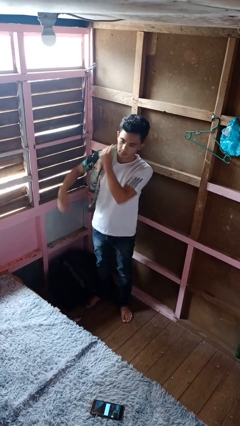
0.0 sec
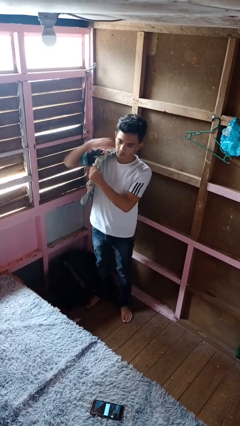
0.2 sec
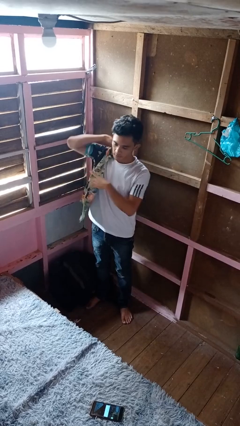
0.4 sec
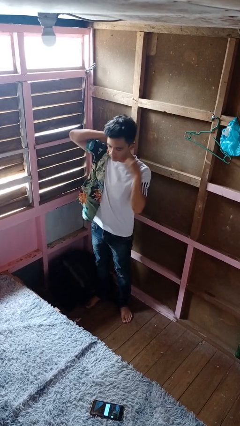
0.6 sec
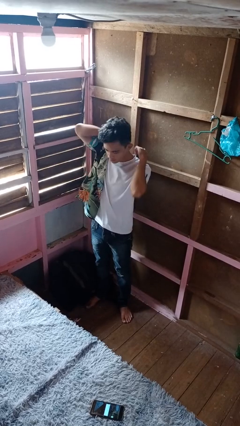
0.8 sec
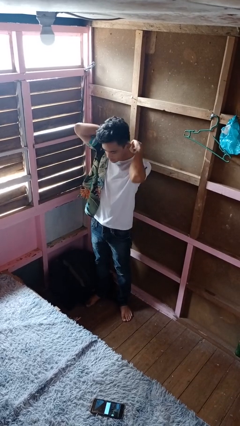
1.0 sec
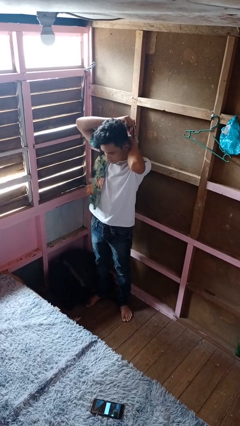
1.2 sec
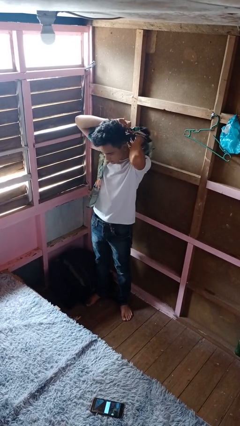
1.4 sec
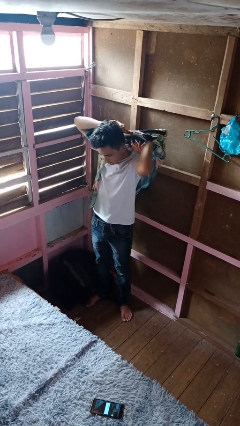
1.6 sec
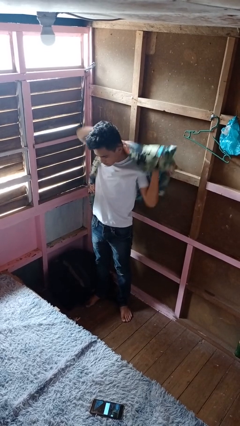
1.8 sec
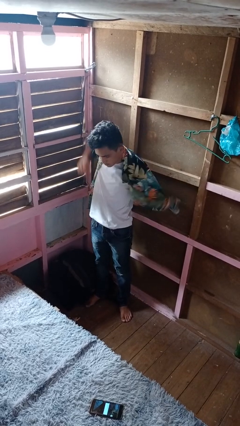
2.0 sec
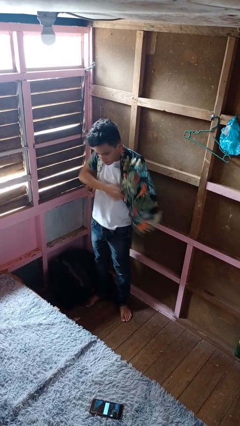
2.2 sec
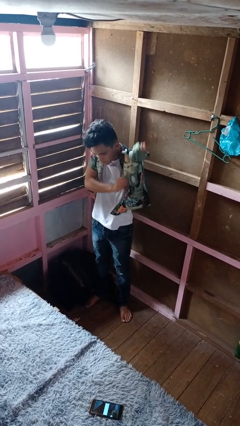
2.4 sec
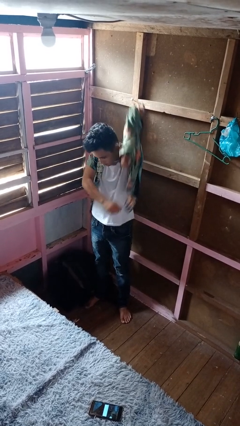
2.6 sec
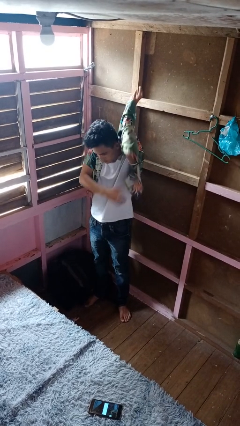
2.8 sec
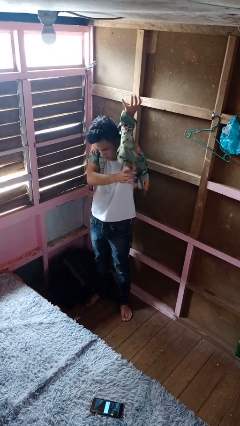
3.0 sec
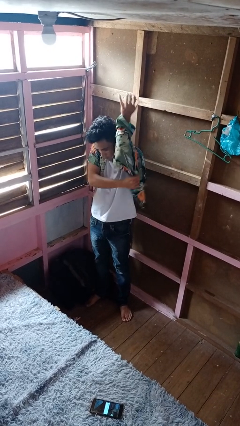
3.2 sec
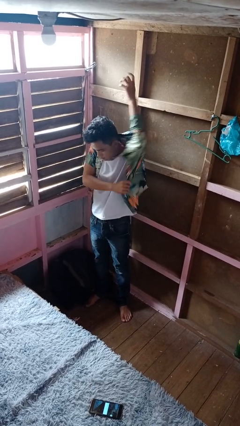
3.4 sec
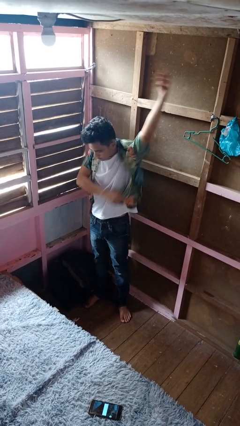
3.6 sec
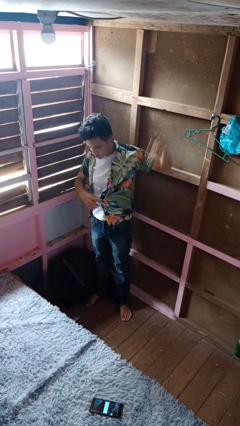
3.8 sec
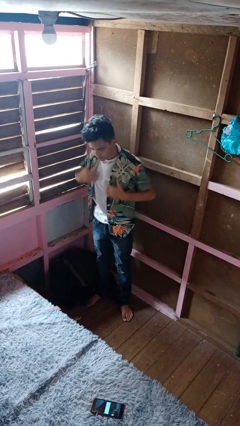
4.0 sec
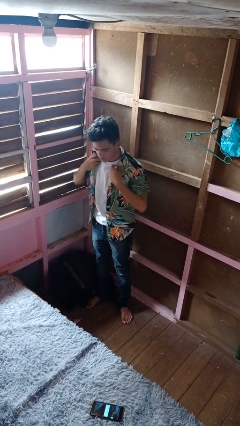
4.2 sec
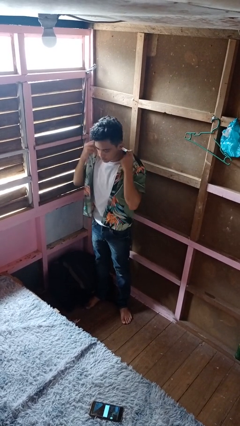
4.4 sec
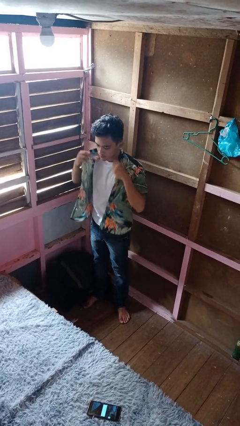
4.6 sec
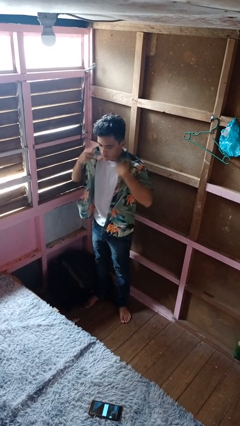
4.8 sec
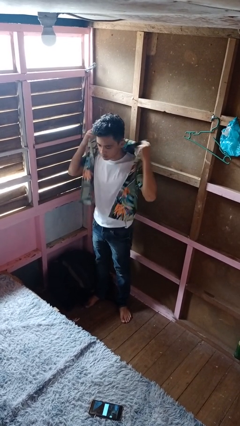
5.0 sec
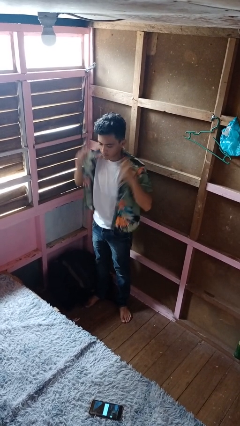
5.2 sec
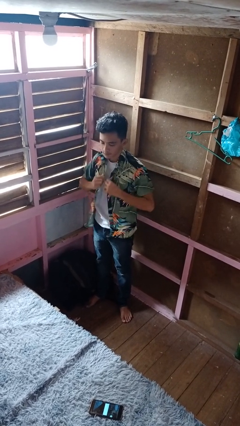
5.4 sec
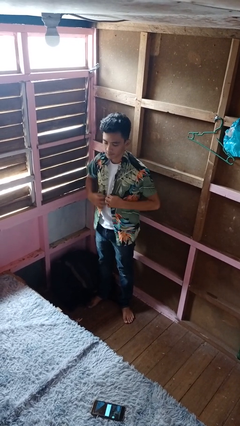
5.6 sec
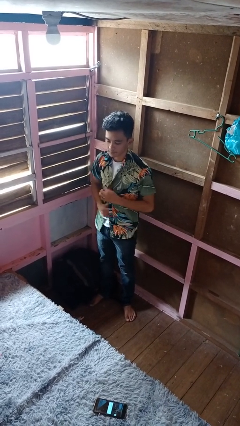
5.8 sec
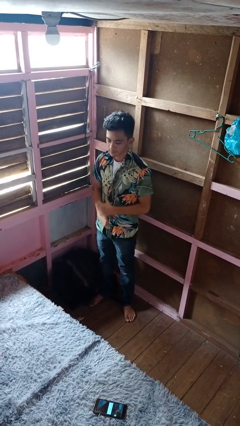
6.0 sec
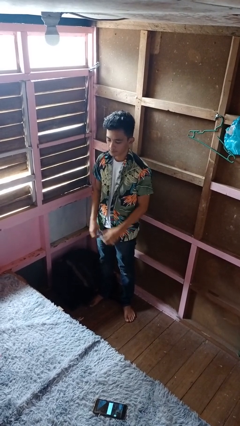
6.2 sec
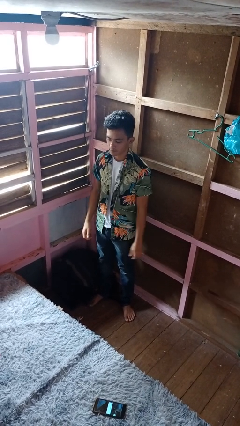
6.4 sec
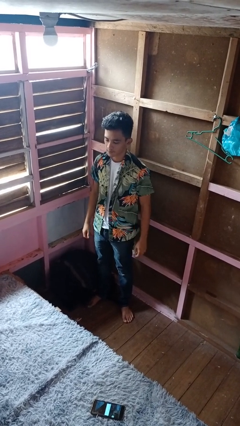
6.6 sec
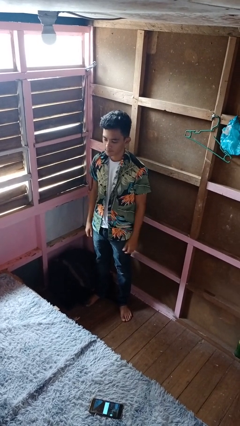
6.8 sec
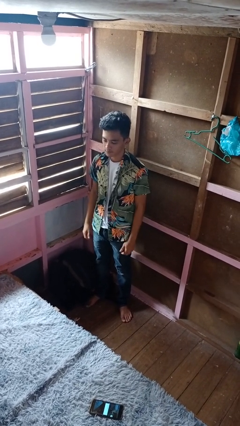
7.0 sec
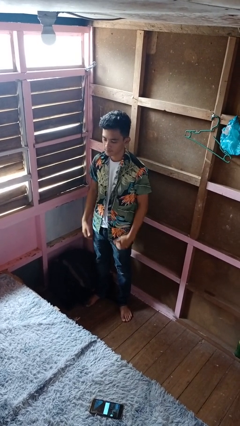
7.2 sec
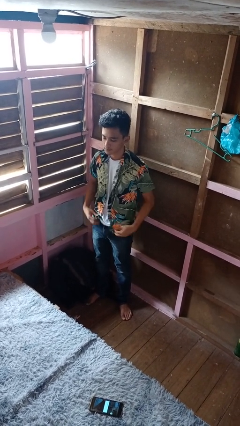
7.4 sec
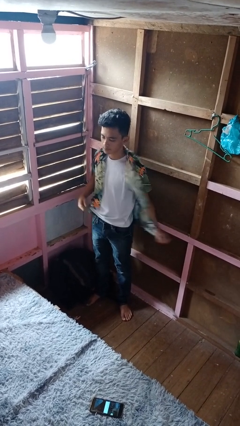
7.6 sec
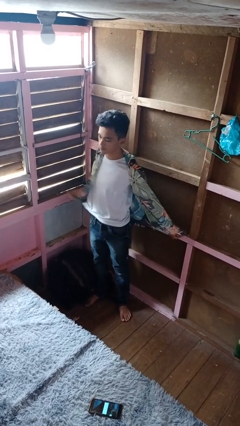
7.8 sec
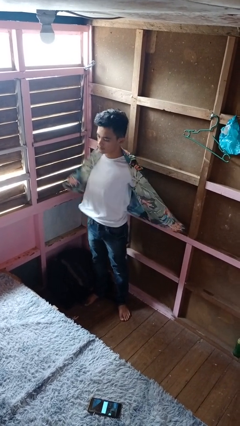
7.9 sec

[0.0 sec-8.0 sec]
person puts on shirt

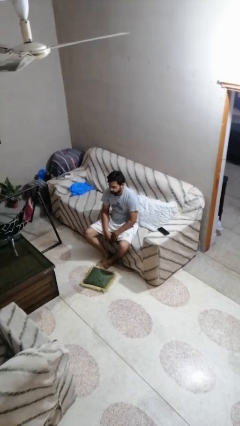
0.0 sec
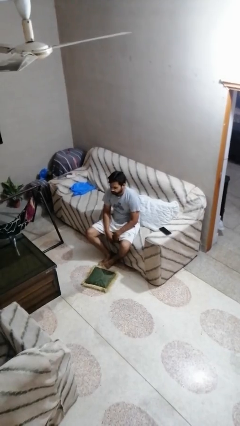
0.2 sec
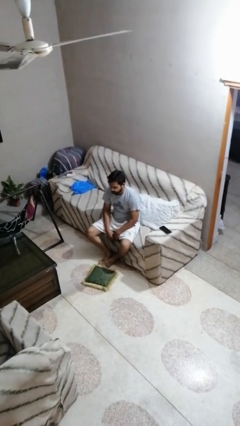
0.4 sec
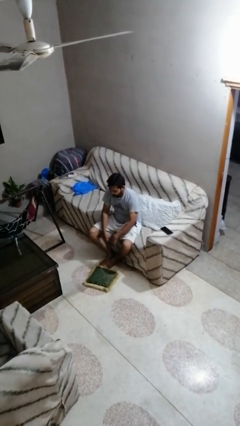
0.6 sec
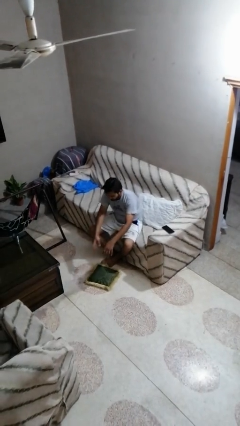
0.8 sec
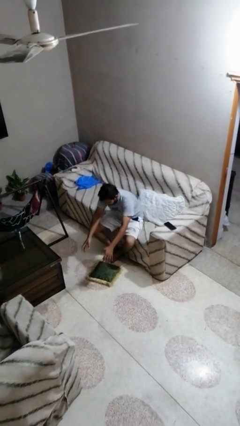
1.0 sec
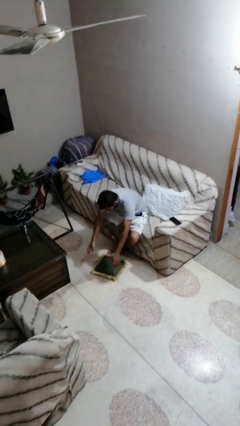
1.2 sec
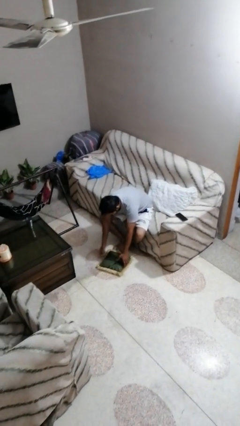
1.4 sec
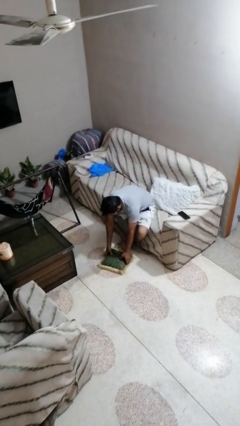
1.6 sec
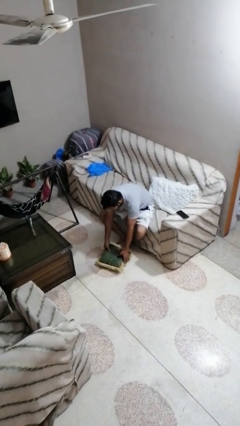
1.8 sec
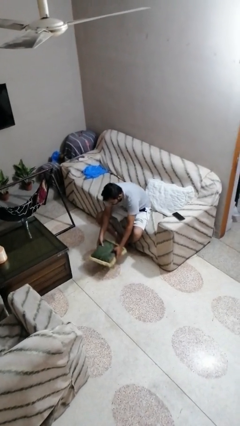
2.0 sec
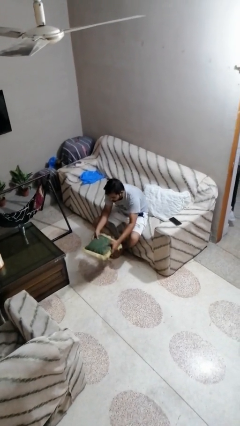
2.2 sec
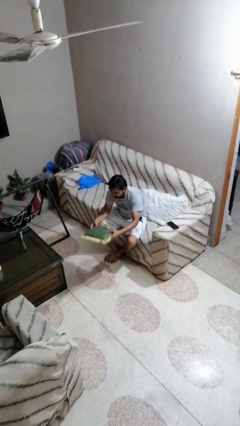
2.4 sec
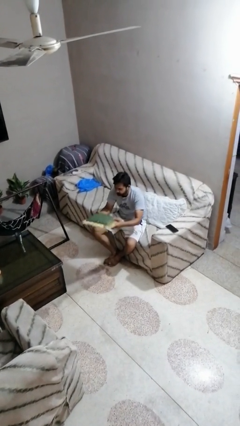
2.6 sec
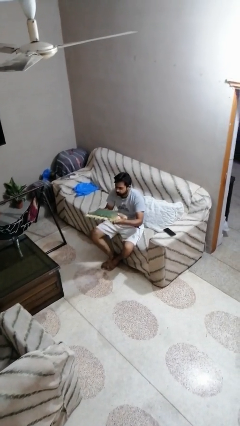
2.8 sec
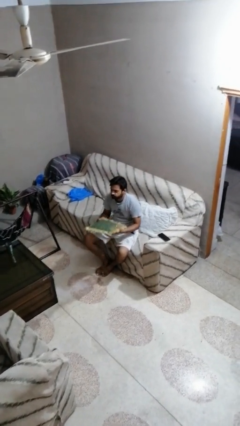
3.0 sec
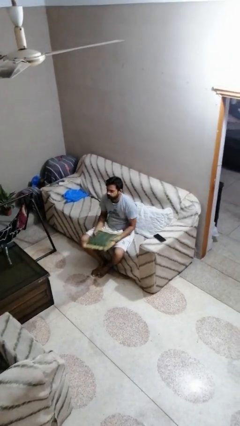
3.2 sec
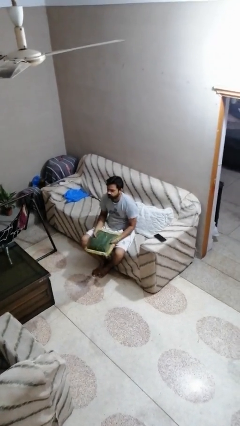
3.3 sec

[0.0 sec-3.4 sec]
person picks up object from floor

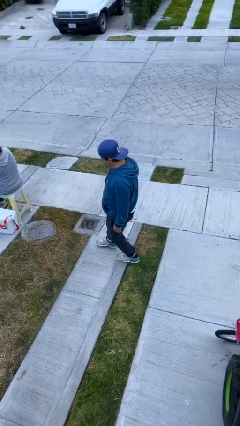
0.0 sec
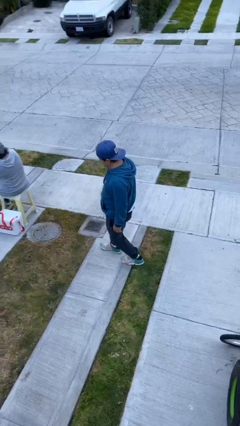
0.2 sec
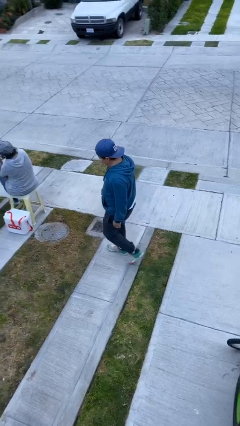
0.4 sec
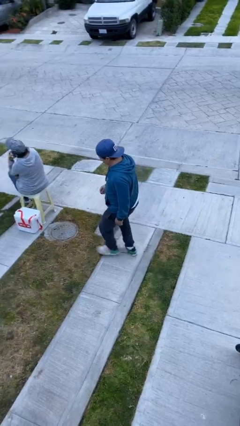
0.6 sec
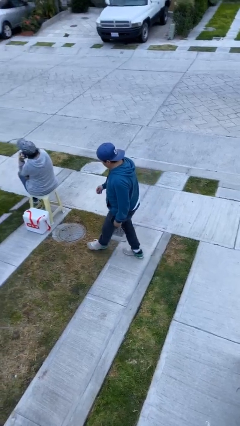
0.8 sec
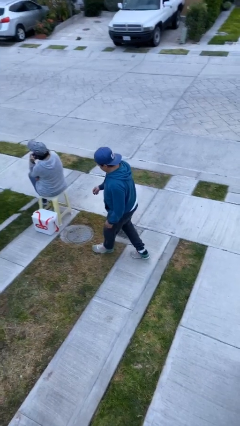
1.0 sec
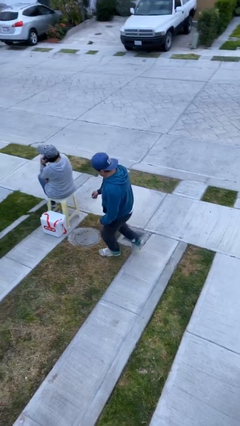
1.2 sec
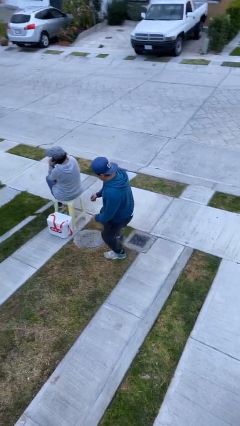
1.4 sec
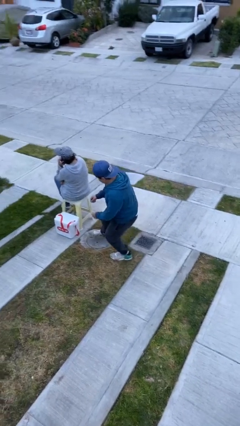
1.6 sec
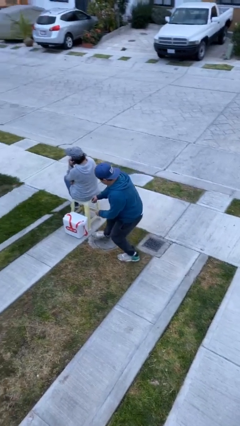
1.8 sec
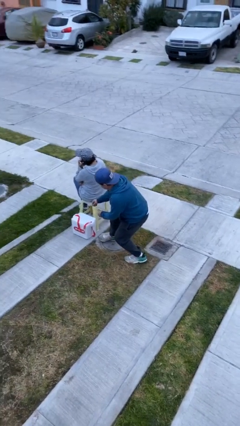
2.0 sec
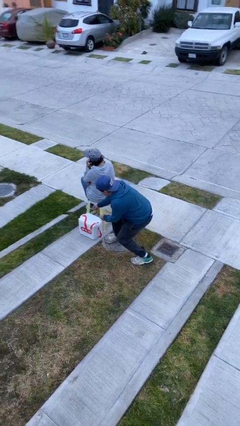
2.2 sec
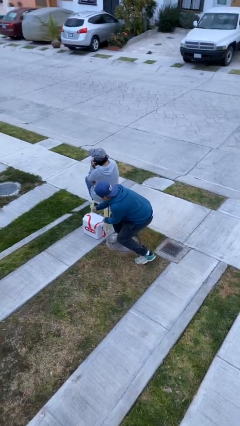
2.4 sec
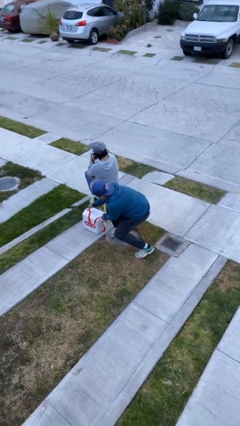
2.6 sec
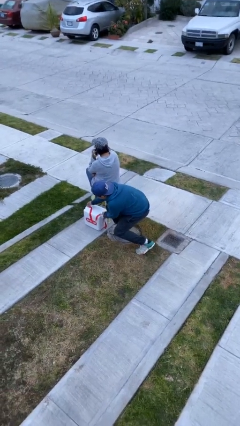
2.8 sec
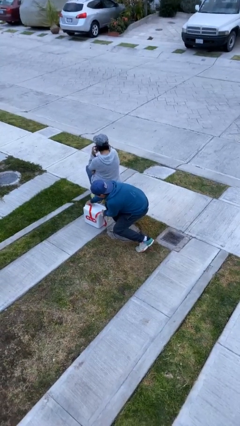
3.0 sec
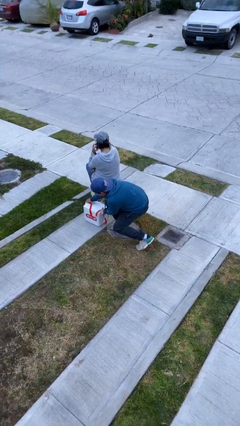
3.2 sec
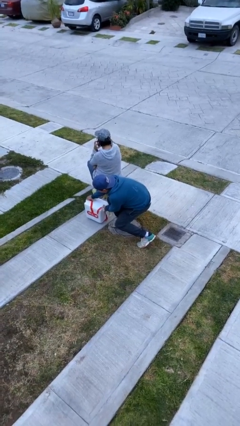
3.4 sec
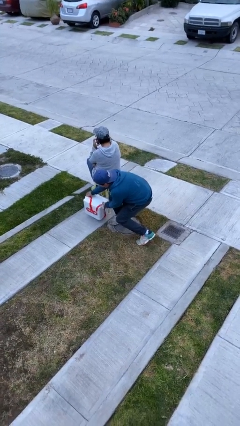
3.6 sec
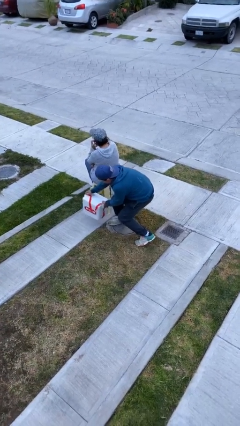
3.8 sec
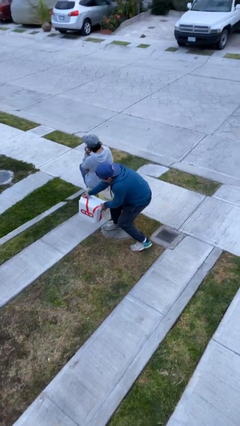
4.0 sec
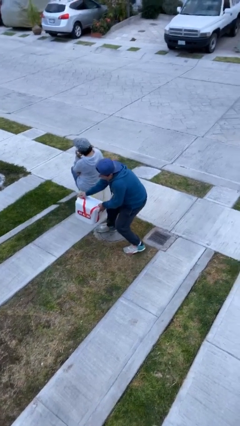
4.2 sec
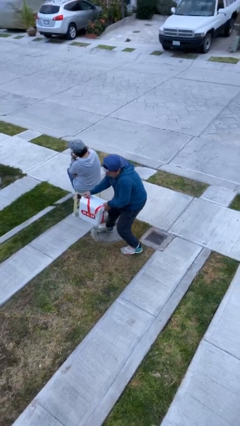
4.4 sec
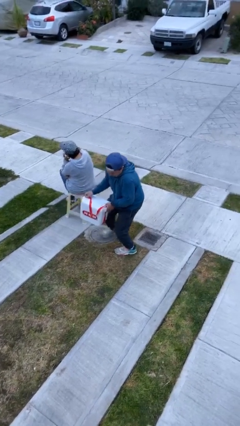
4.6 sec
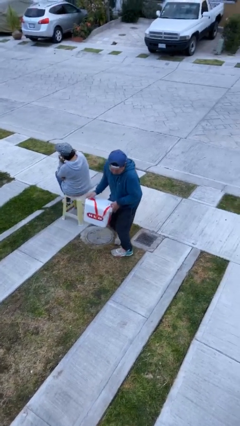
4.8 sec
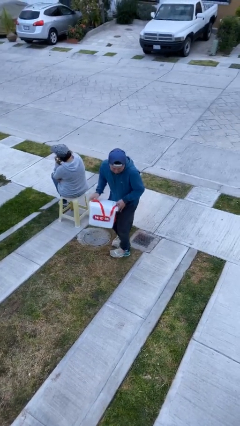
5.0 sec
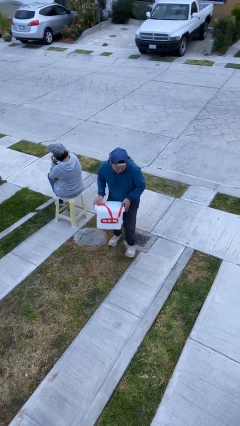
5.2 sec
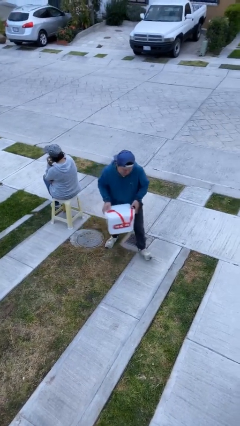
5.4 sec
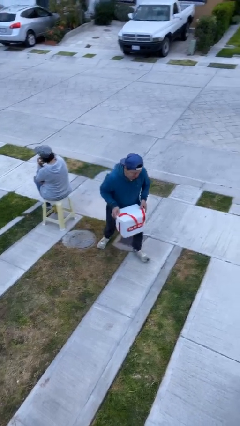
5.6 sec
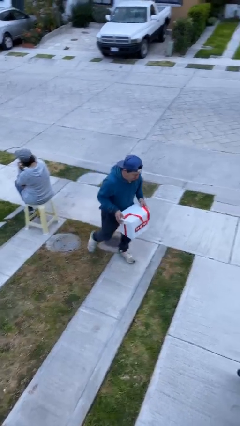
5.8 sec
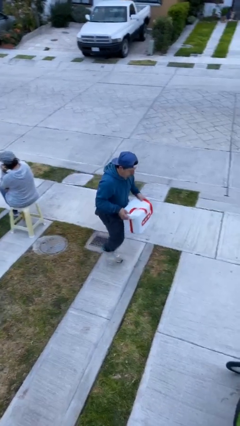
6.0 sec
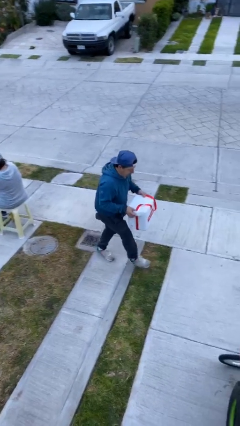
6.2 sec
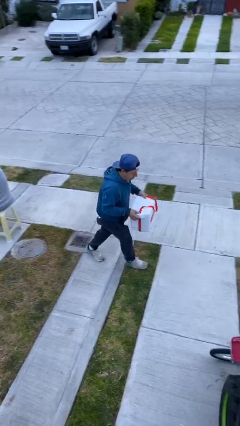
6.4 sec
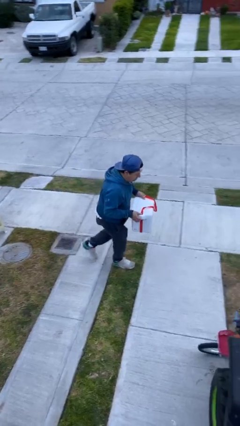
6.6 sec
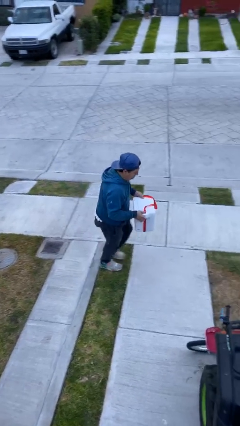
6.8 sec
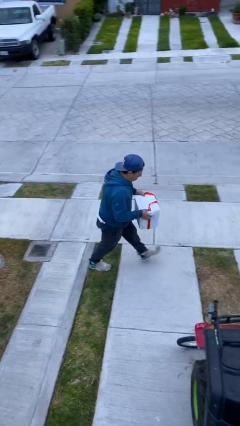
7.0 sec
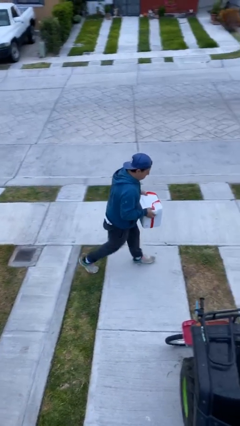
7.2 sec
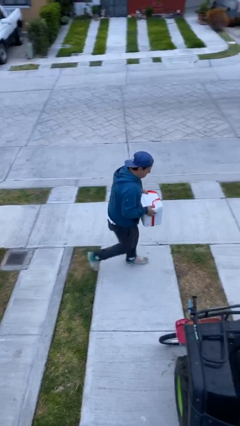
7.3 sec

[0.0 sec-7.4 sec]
person steals object from person
